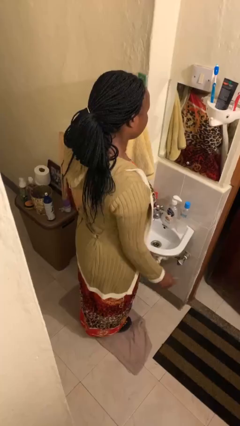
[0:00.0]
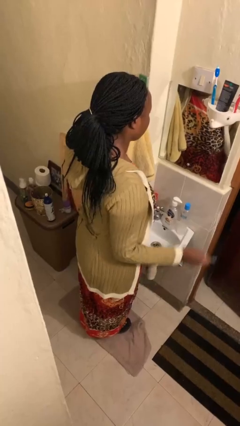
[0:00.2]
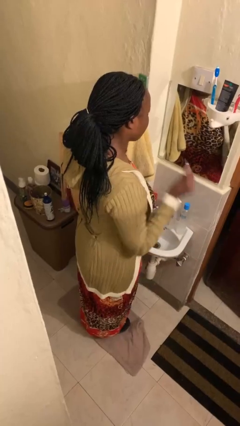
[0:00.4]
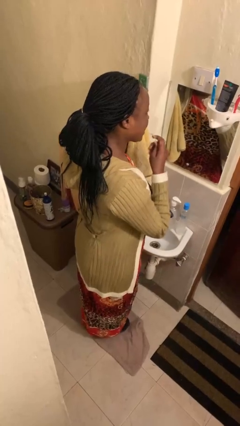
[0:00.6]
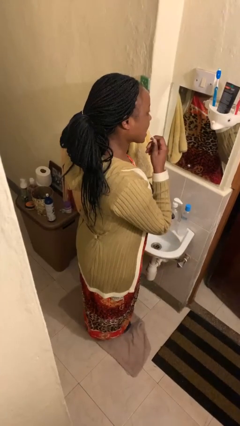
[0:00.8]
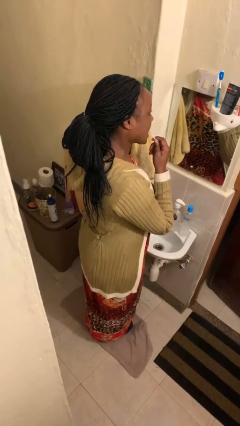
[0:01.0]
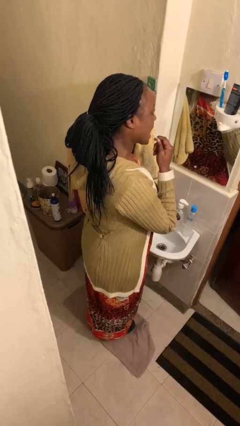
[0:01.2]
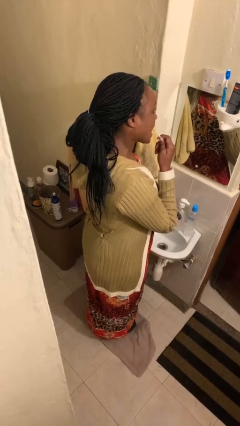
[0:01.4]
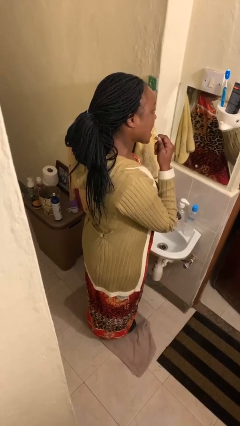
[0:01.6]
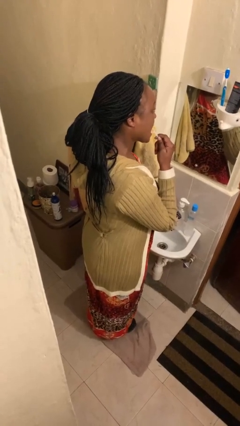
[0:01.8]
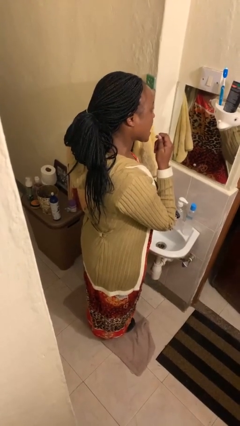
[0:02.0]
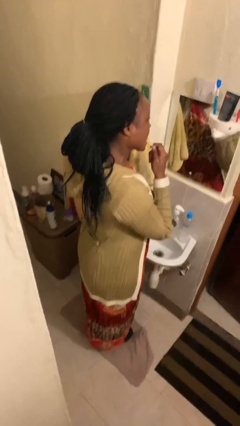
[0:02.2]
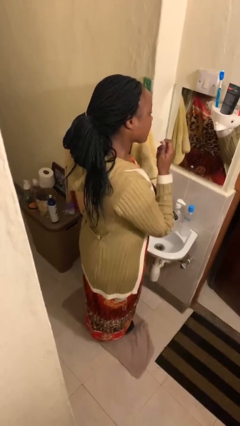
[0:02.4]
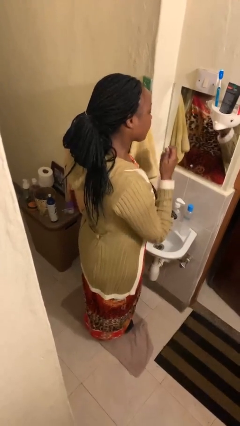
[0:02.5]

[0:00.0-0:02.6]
person flosses

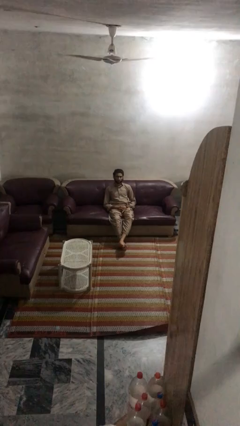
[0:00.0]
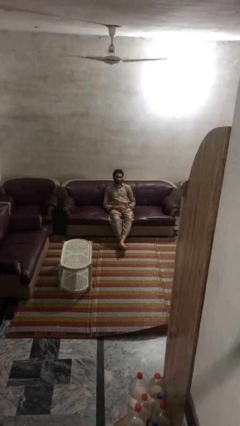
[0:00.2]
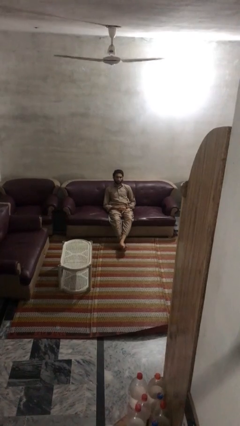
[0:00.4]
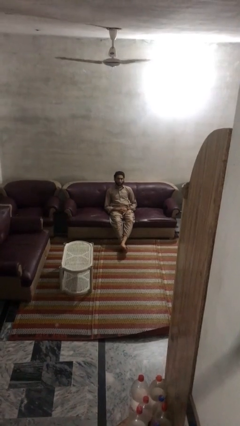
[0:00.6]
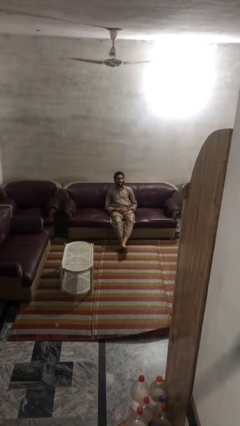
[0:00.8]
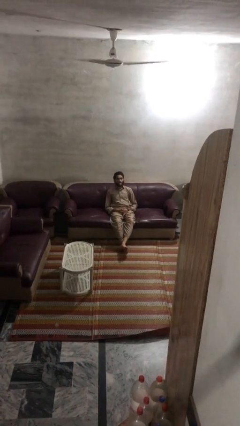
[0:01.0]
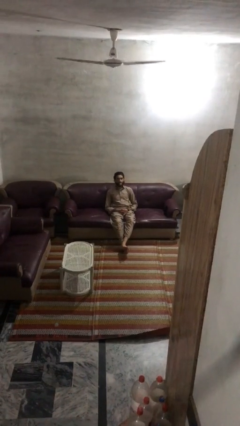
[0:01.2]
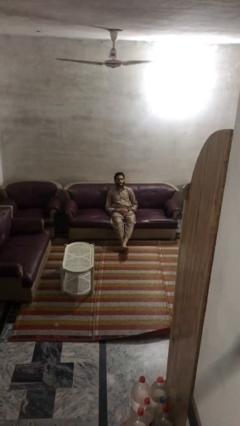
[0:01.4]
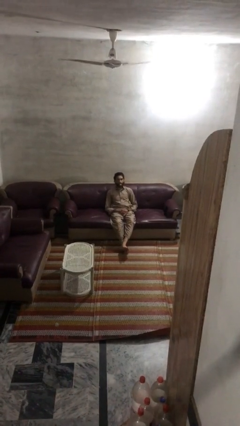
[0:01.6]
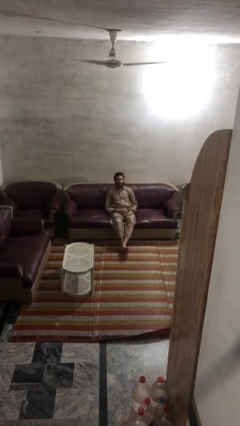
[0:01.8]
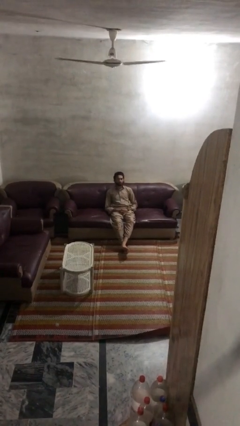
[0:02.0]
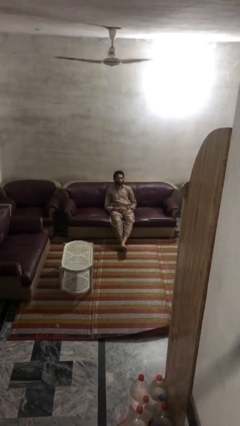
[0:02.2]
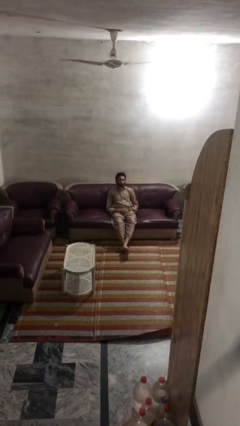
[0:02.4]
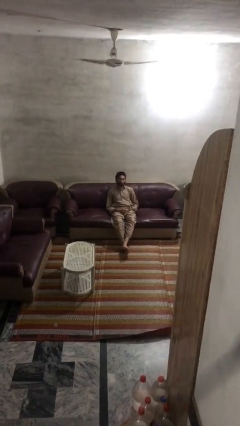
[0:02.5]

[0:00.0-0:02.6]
person sticks out tongue

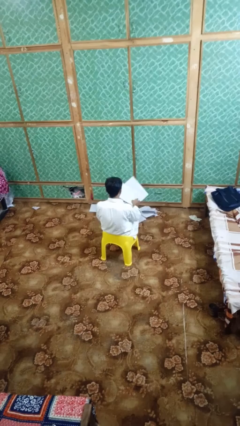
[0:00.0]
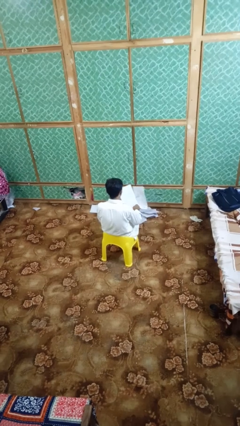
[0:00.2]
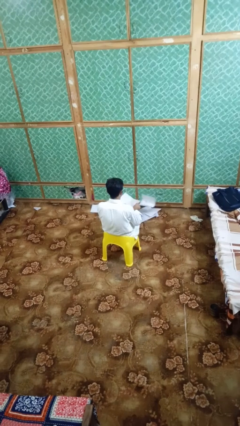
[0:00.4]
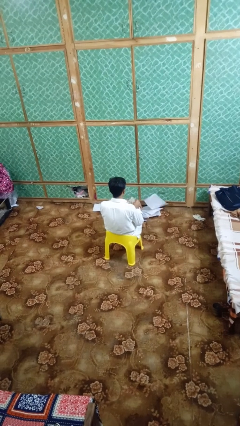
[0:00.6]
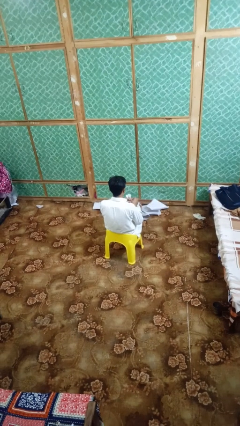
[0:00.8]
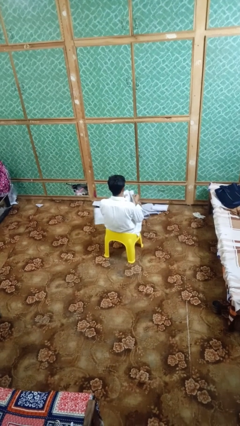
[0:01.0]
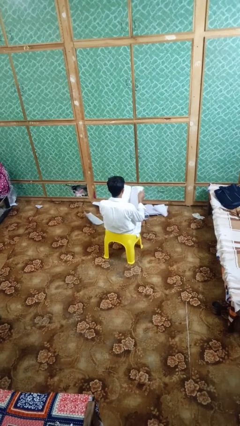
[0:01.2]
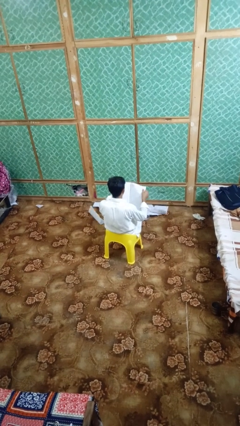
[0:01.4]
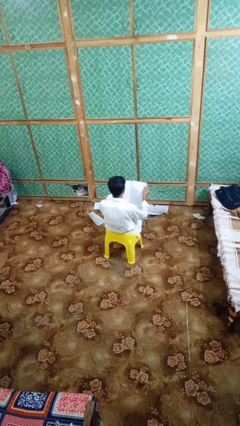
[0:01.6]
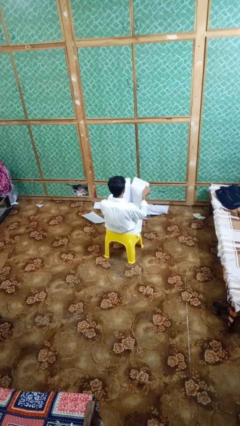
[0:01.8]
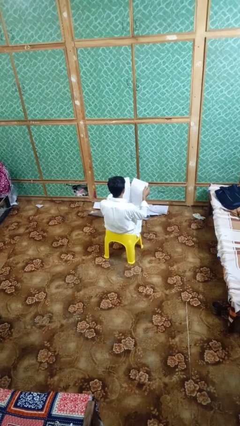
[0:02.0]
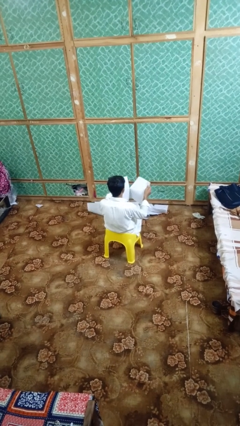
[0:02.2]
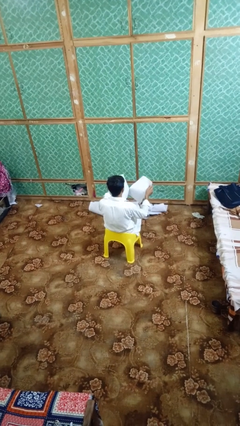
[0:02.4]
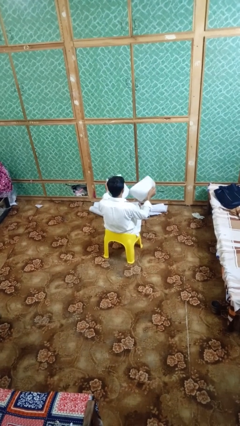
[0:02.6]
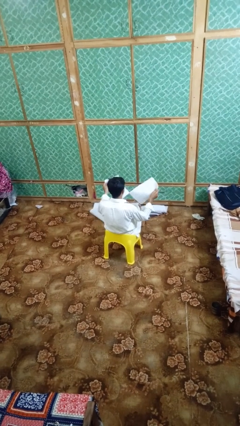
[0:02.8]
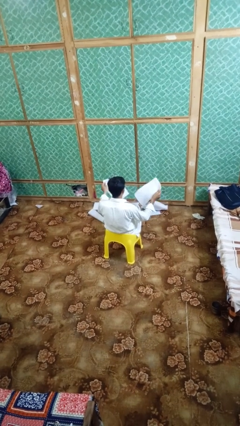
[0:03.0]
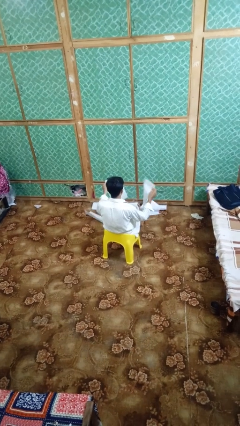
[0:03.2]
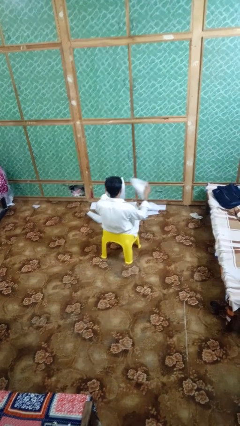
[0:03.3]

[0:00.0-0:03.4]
person tears paper

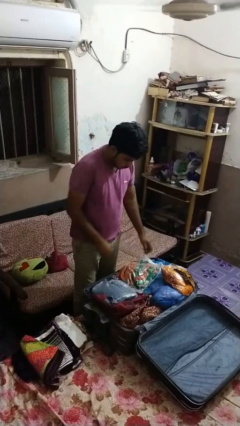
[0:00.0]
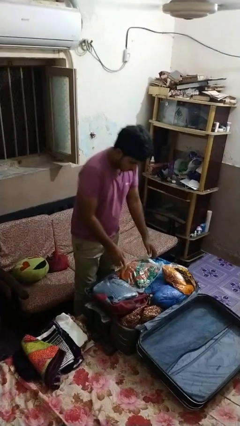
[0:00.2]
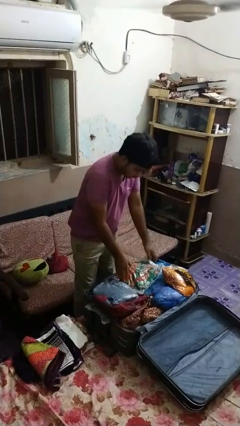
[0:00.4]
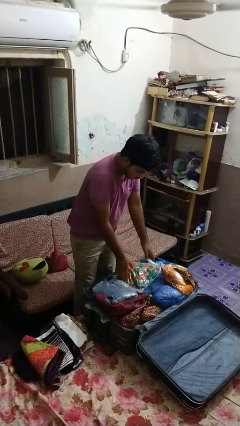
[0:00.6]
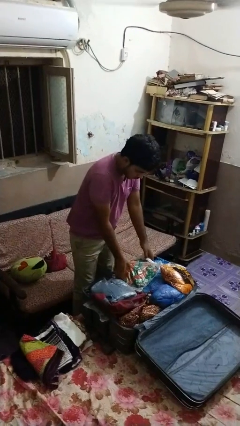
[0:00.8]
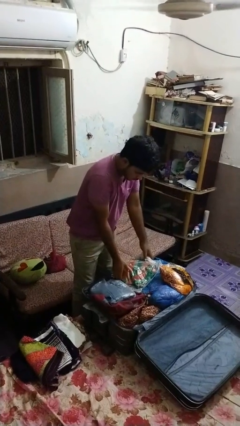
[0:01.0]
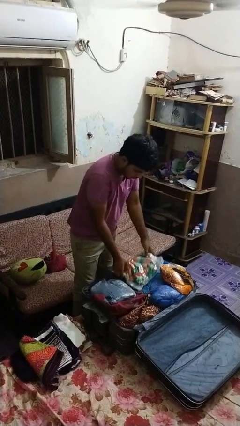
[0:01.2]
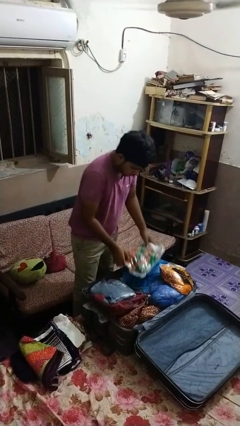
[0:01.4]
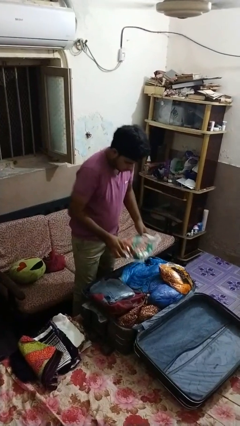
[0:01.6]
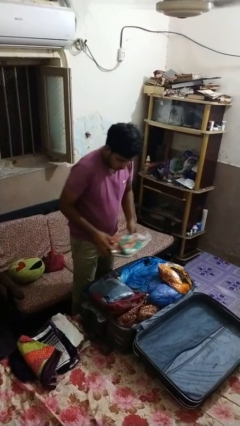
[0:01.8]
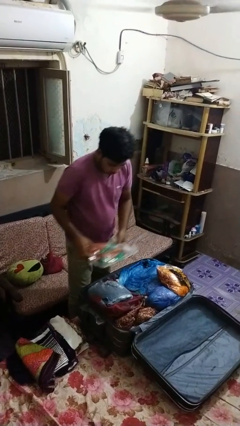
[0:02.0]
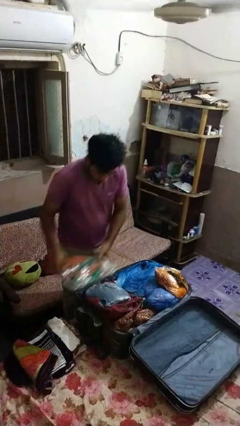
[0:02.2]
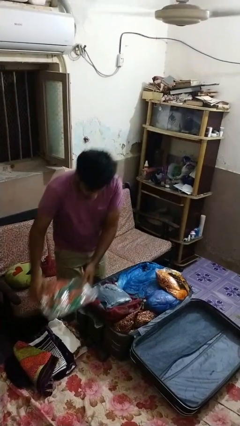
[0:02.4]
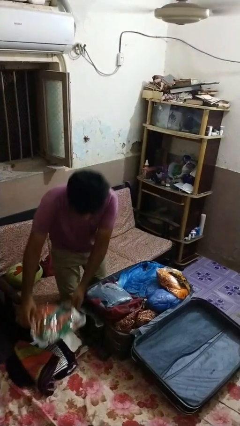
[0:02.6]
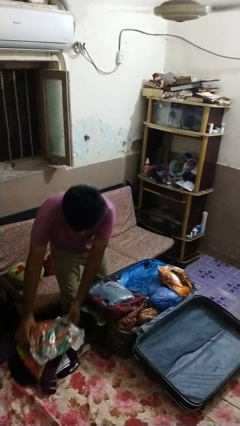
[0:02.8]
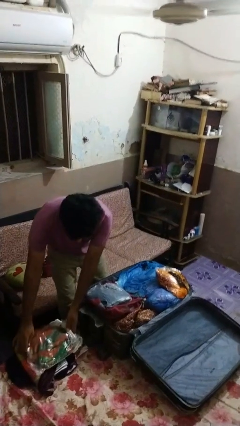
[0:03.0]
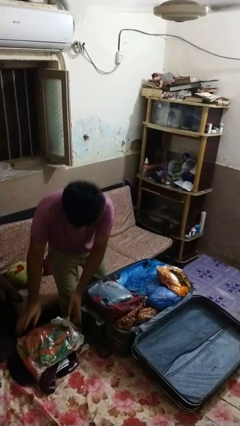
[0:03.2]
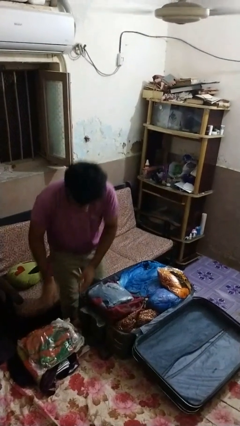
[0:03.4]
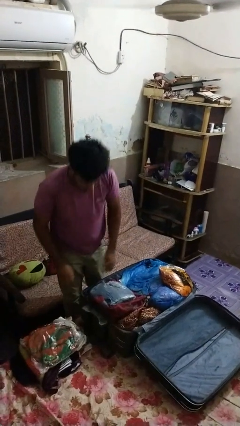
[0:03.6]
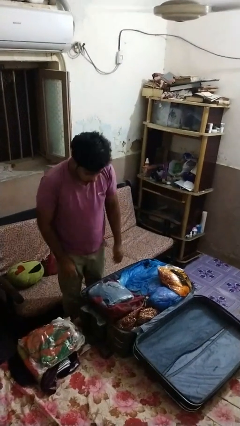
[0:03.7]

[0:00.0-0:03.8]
person unloads clothes from suitcase

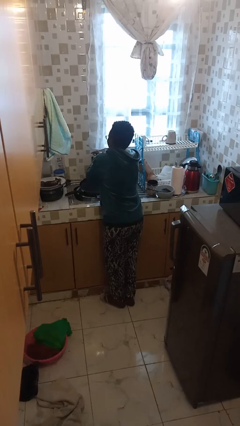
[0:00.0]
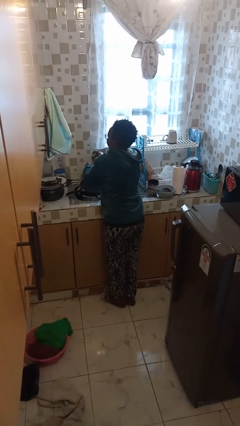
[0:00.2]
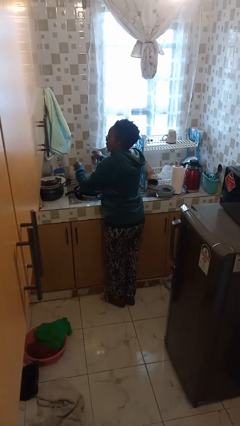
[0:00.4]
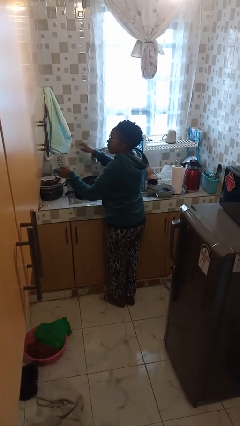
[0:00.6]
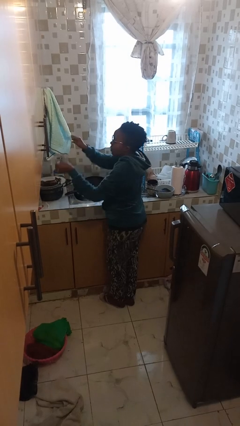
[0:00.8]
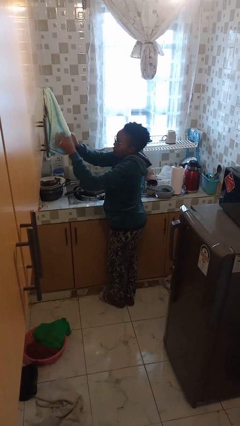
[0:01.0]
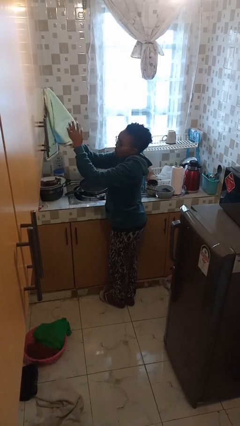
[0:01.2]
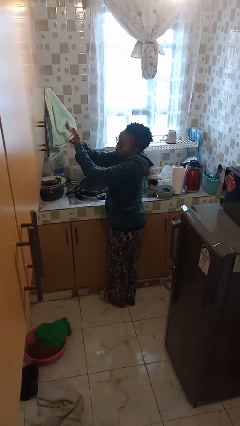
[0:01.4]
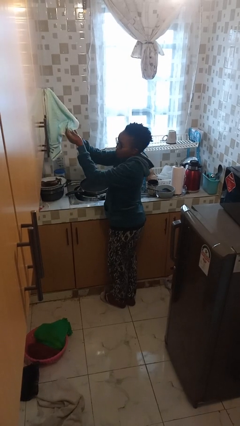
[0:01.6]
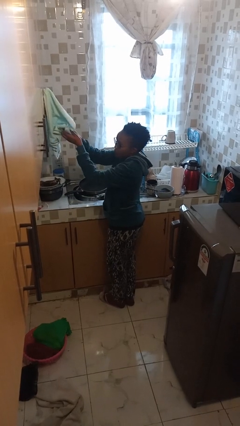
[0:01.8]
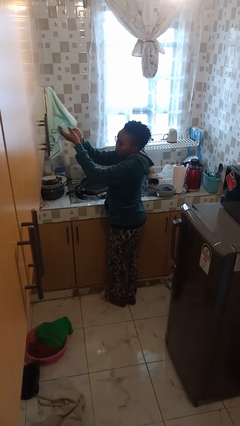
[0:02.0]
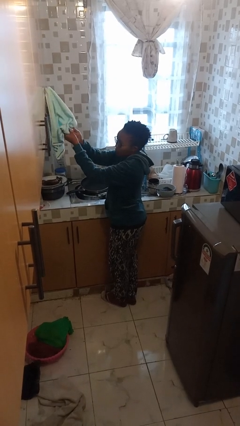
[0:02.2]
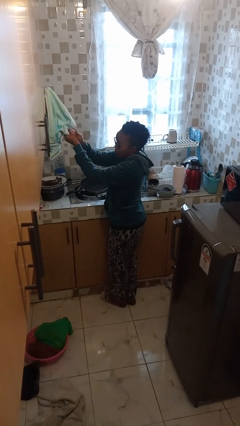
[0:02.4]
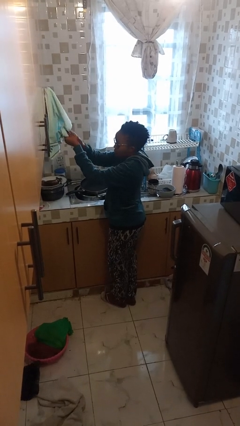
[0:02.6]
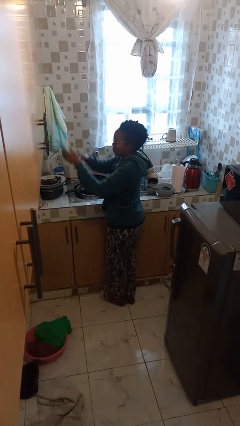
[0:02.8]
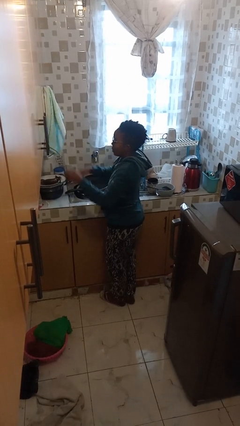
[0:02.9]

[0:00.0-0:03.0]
person dries hands with towel

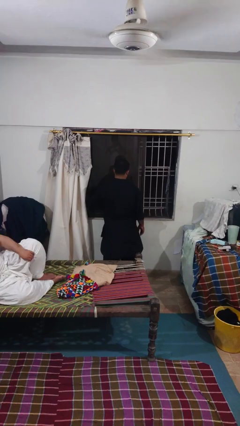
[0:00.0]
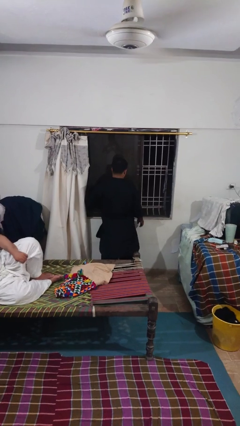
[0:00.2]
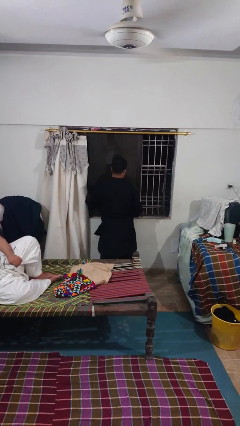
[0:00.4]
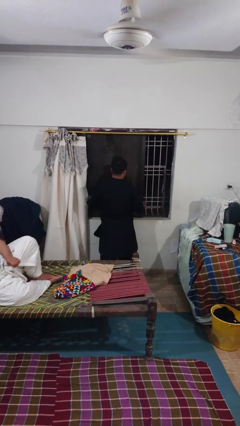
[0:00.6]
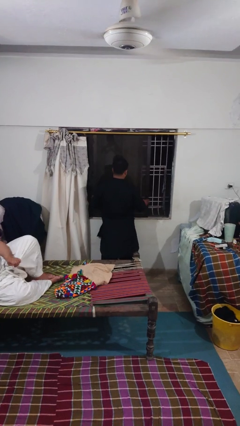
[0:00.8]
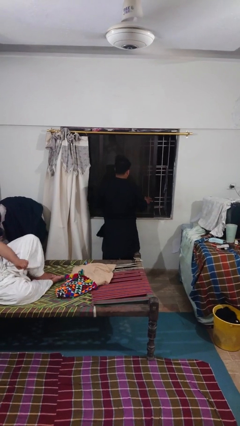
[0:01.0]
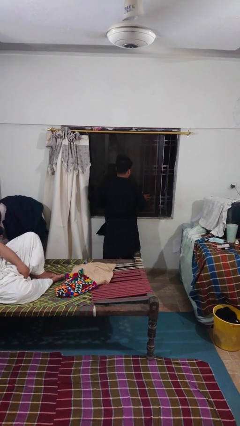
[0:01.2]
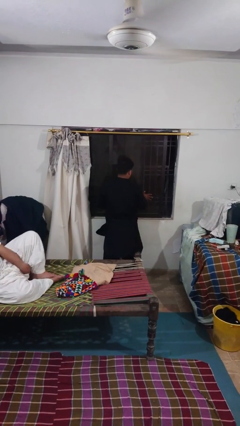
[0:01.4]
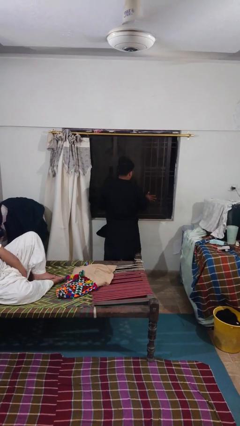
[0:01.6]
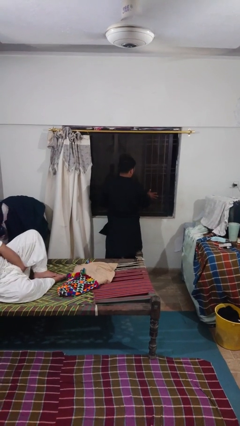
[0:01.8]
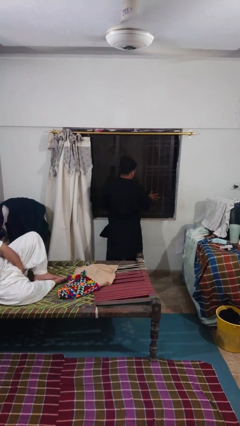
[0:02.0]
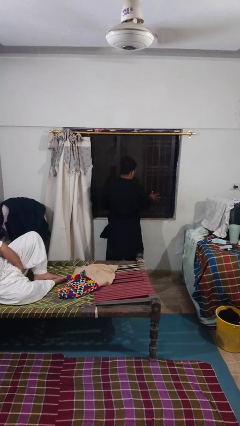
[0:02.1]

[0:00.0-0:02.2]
person closes sliding door
